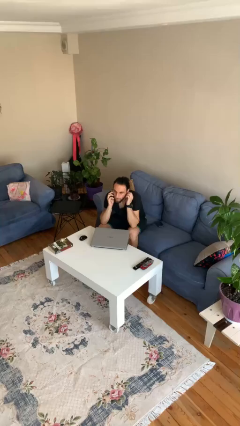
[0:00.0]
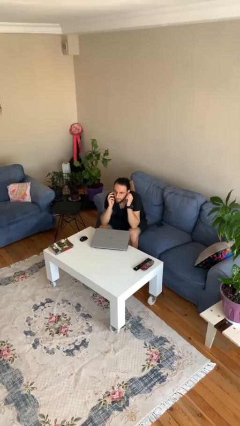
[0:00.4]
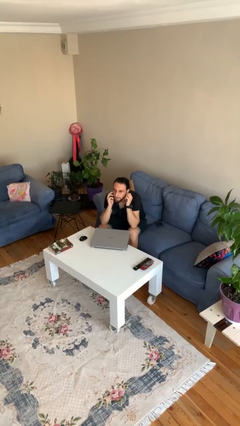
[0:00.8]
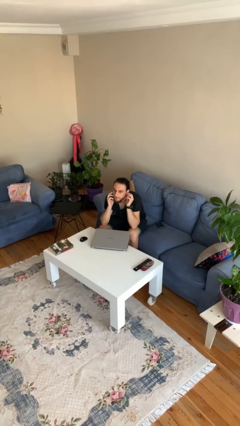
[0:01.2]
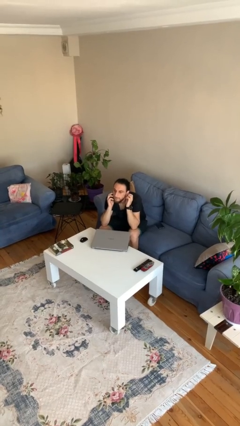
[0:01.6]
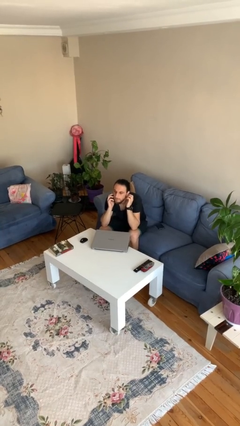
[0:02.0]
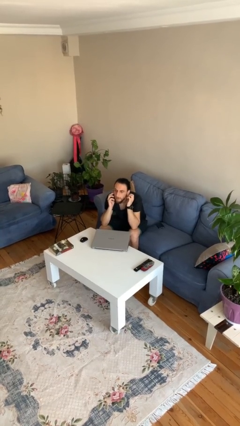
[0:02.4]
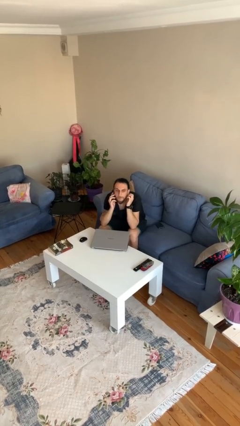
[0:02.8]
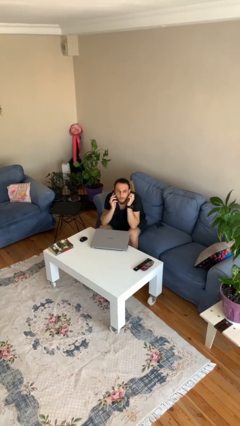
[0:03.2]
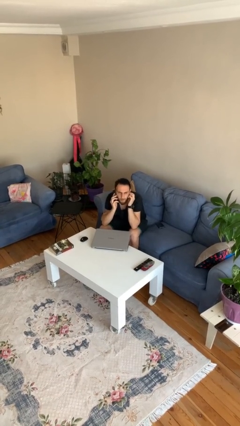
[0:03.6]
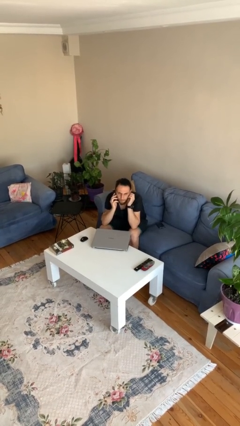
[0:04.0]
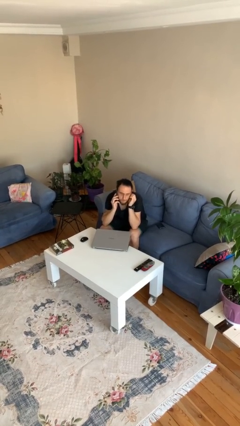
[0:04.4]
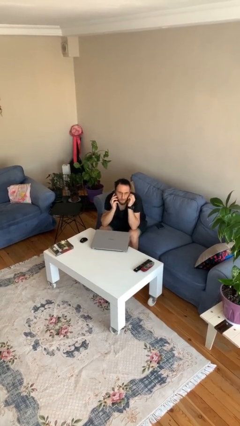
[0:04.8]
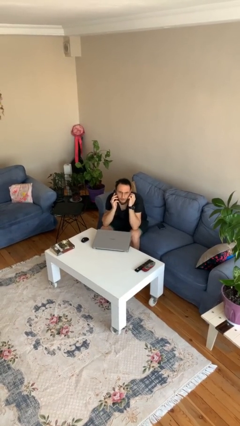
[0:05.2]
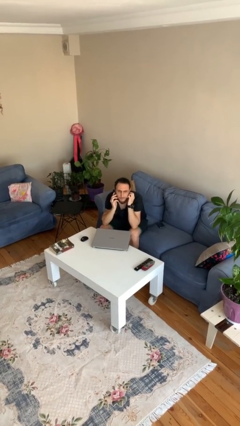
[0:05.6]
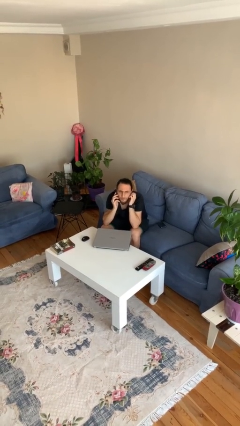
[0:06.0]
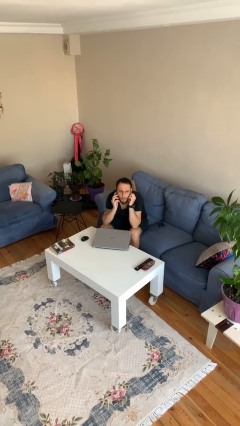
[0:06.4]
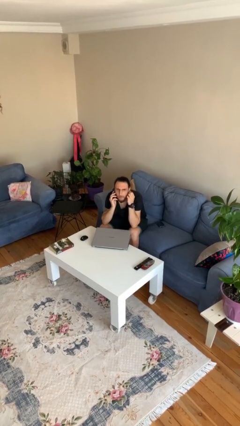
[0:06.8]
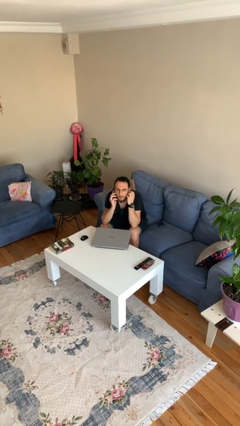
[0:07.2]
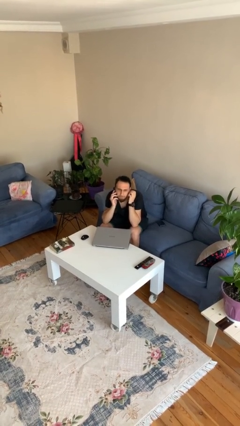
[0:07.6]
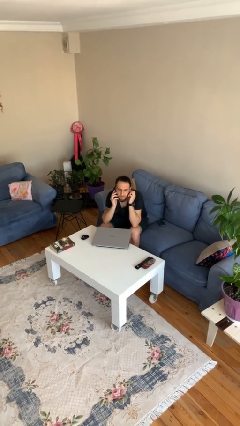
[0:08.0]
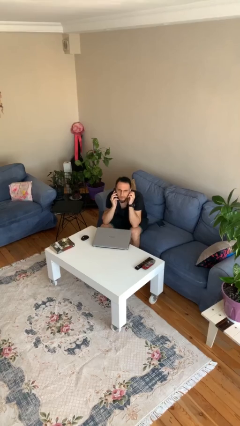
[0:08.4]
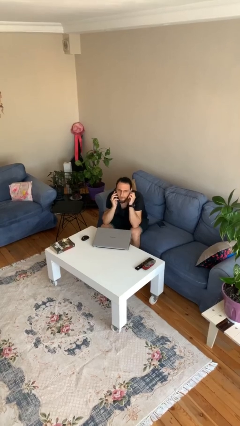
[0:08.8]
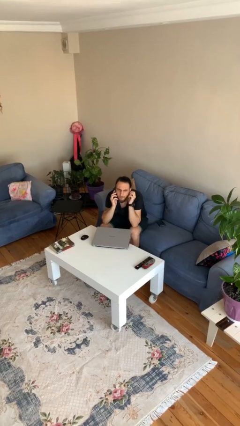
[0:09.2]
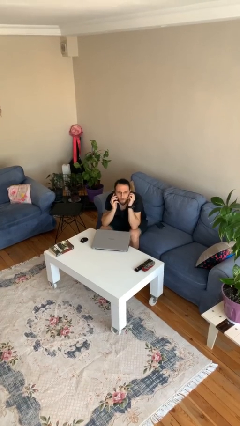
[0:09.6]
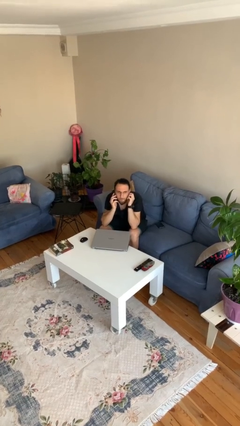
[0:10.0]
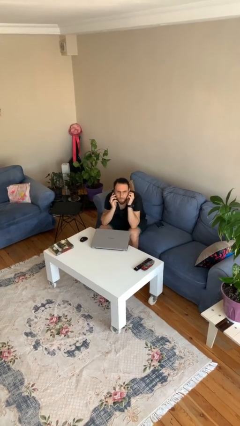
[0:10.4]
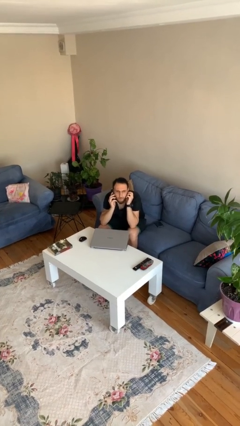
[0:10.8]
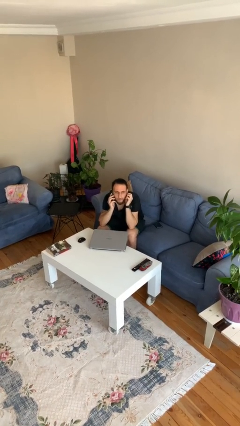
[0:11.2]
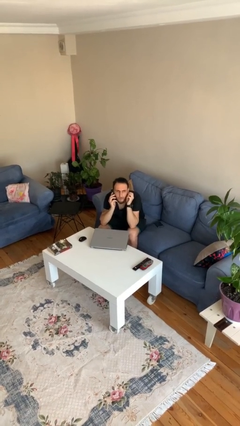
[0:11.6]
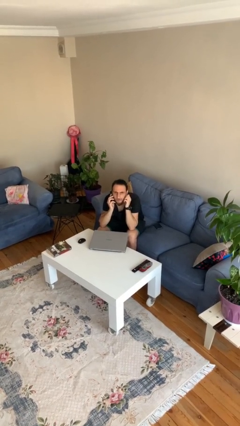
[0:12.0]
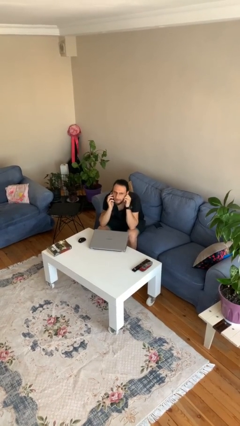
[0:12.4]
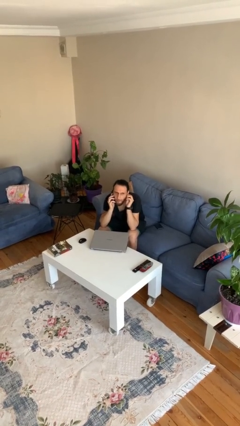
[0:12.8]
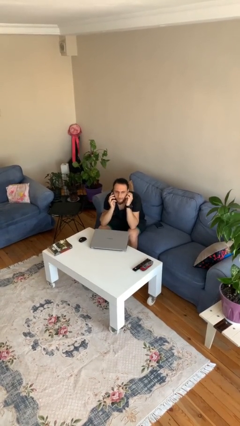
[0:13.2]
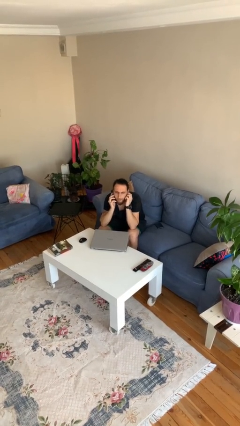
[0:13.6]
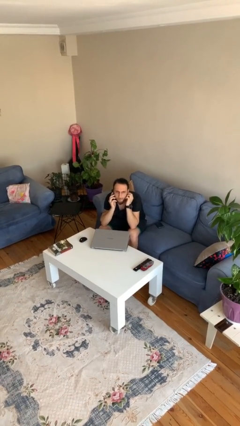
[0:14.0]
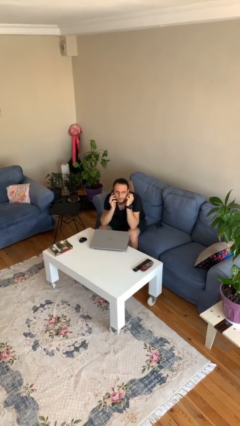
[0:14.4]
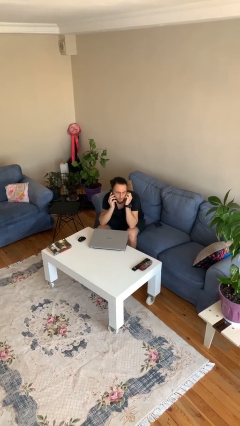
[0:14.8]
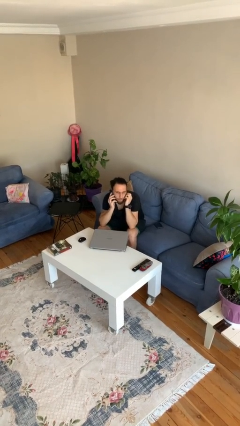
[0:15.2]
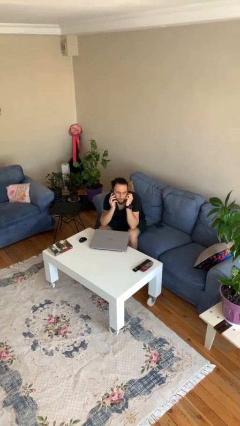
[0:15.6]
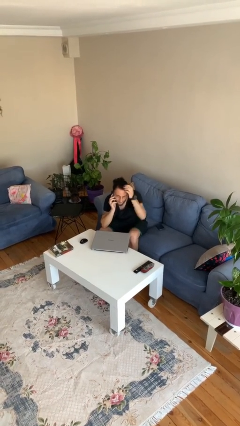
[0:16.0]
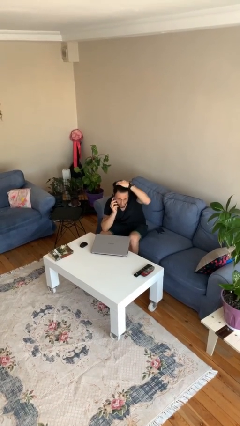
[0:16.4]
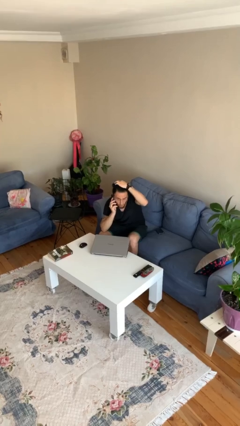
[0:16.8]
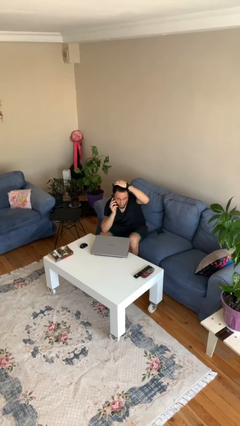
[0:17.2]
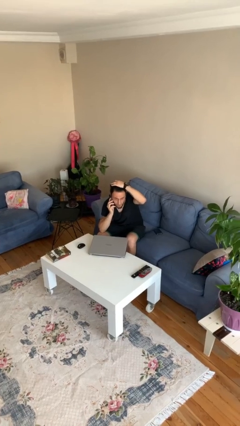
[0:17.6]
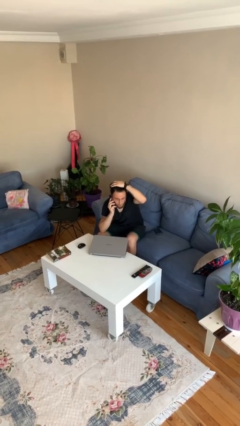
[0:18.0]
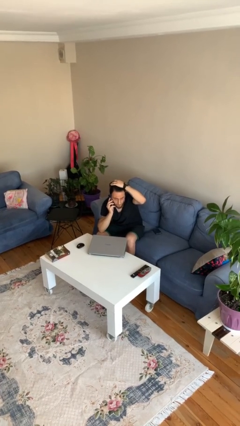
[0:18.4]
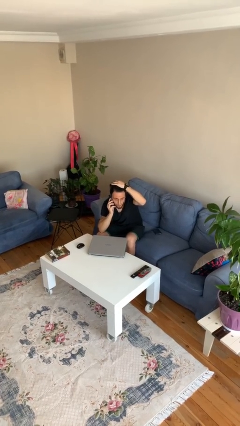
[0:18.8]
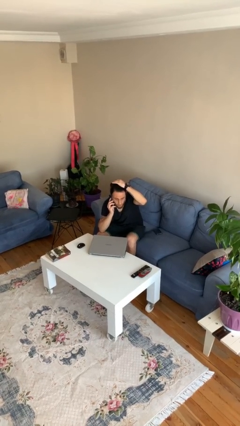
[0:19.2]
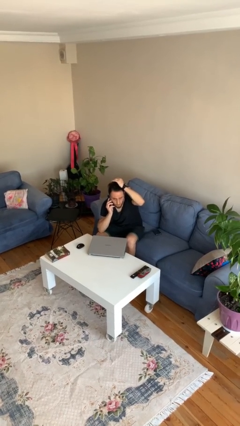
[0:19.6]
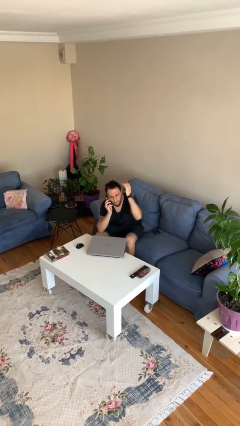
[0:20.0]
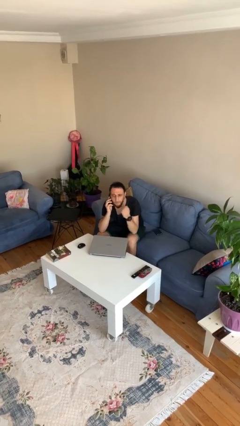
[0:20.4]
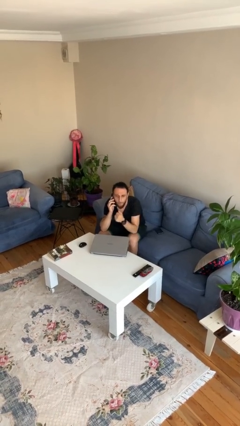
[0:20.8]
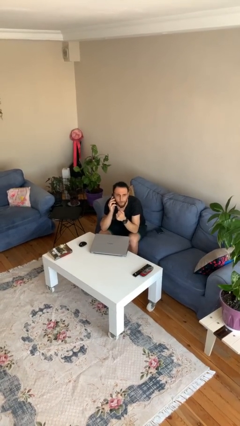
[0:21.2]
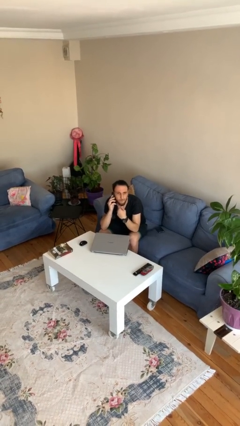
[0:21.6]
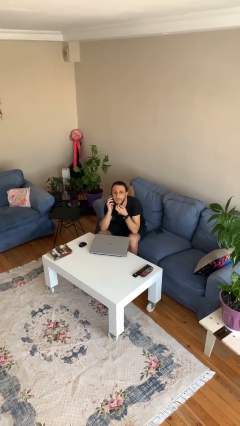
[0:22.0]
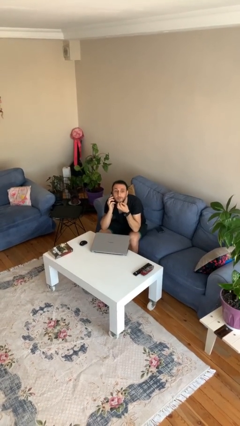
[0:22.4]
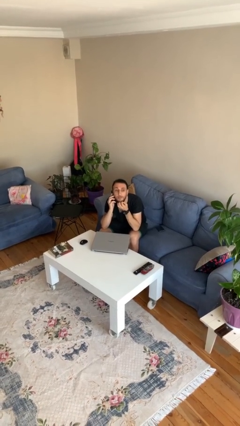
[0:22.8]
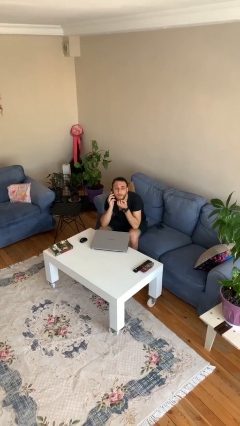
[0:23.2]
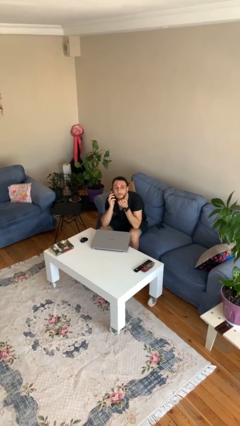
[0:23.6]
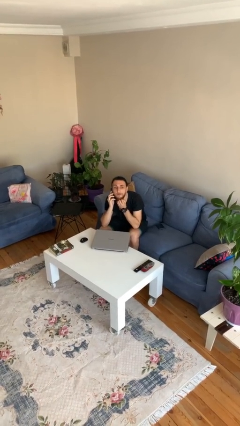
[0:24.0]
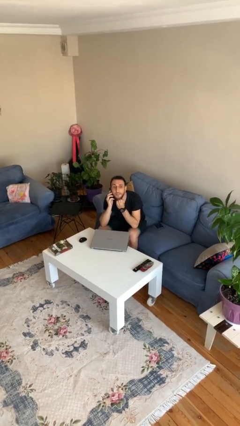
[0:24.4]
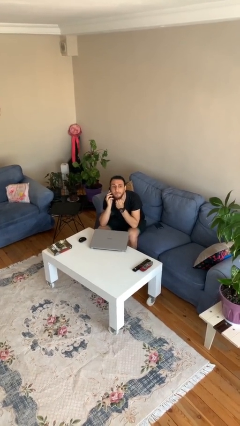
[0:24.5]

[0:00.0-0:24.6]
person talks on phone

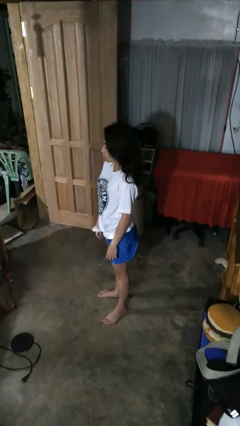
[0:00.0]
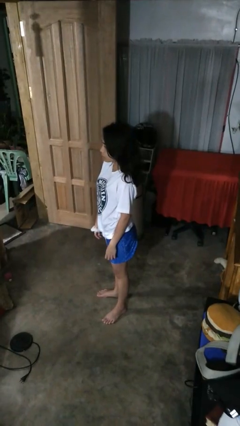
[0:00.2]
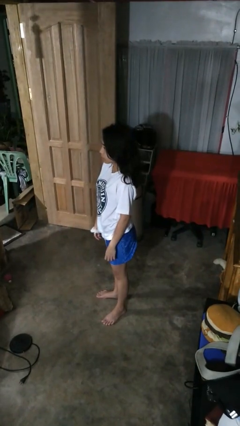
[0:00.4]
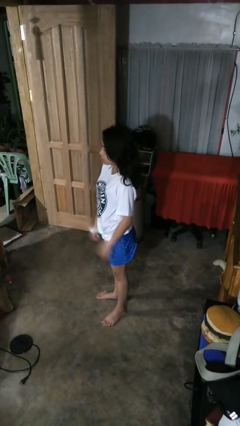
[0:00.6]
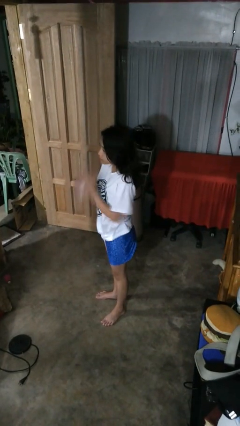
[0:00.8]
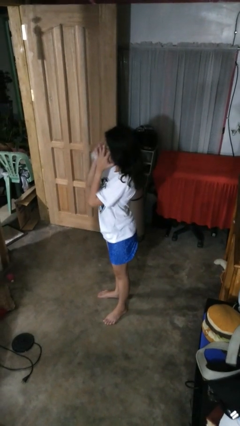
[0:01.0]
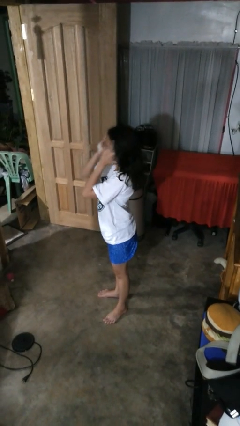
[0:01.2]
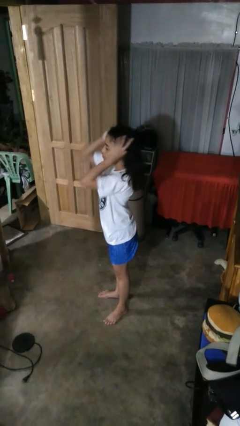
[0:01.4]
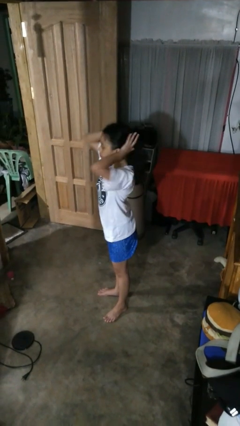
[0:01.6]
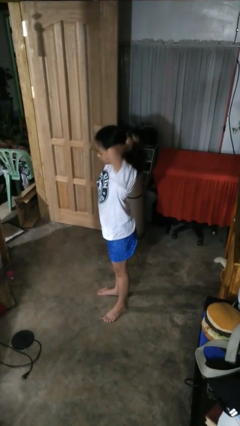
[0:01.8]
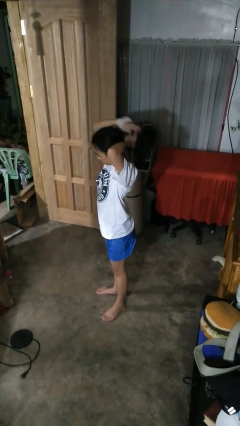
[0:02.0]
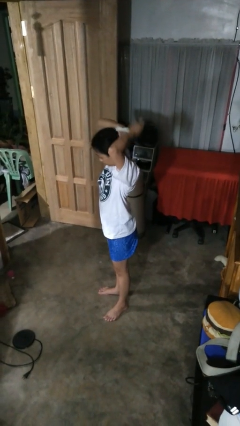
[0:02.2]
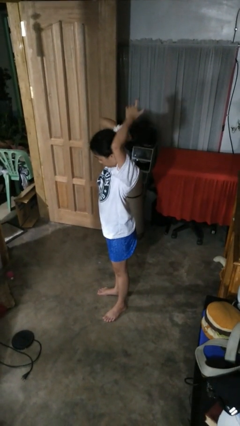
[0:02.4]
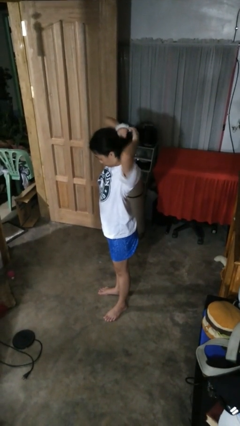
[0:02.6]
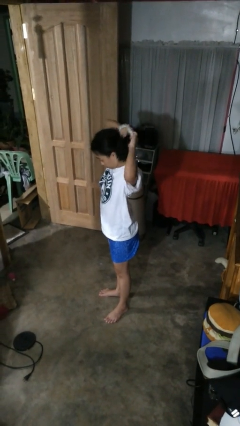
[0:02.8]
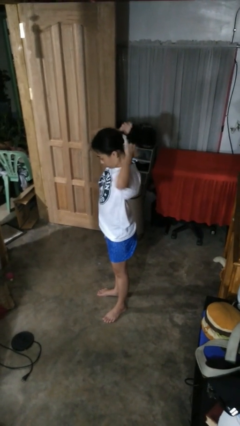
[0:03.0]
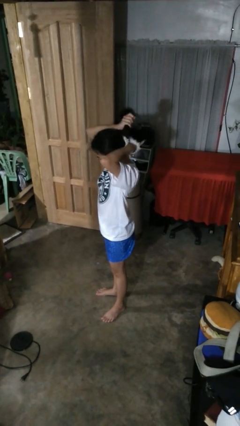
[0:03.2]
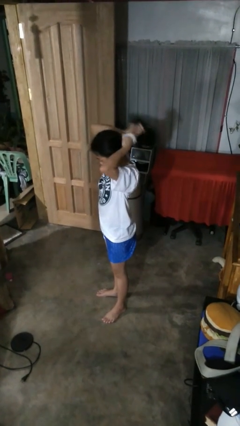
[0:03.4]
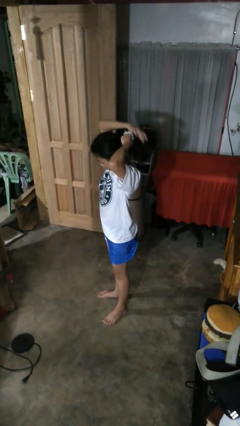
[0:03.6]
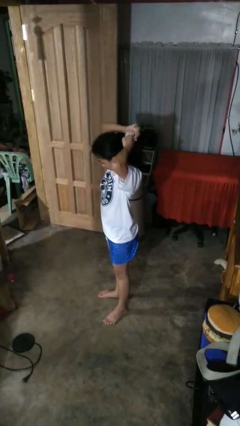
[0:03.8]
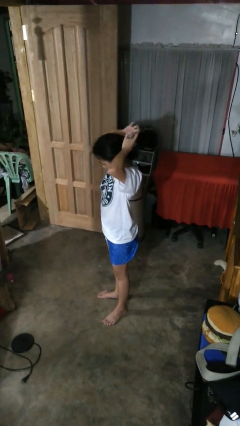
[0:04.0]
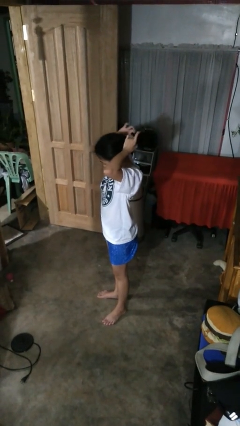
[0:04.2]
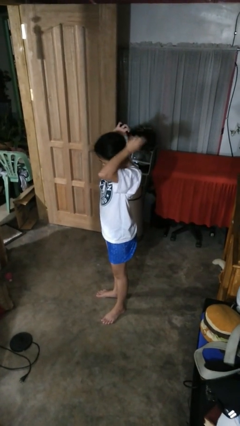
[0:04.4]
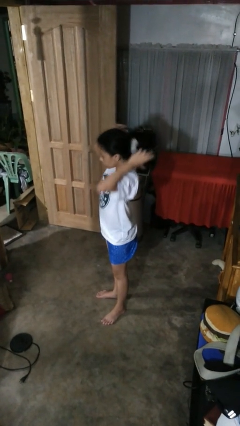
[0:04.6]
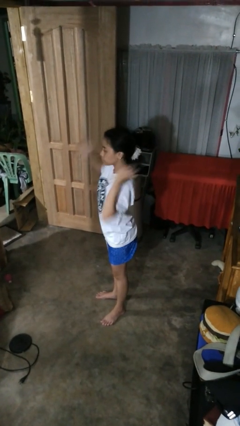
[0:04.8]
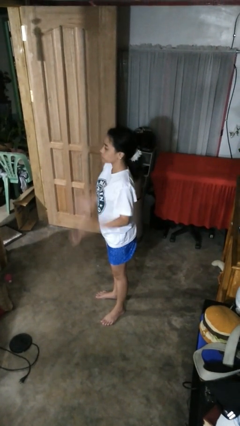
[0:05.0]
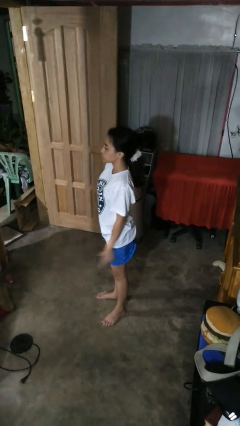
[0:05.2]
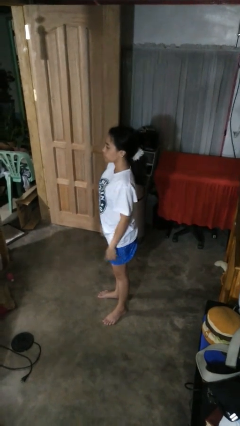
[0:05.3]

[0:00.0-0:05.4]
person puts hair in ponytail

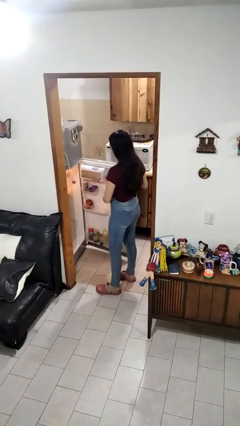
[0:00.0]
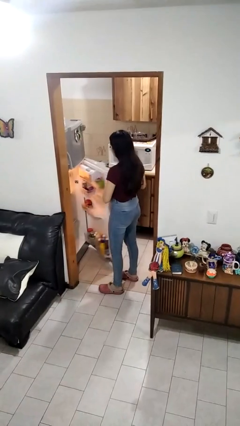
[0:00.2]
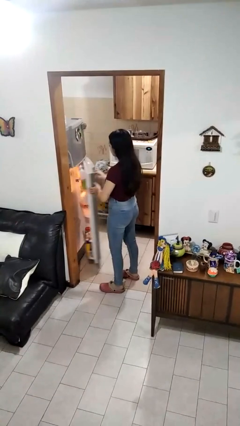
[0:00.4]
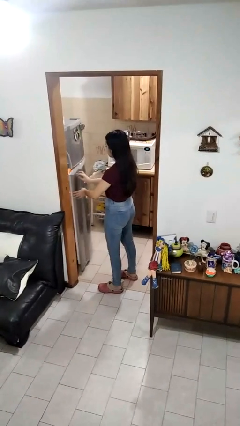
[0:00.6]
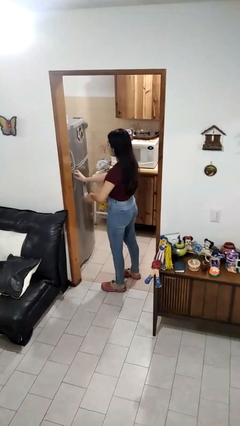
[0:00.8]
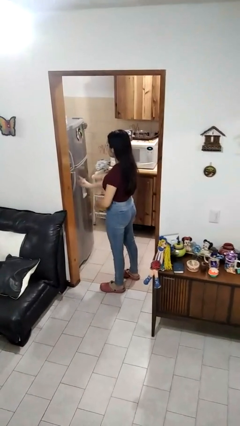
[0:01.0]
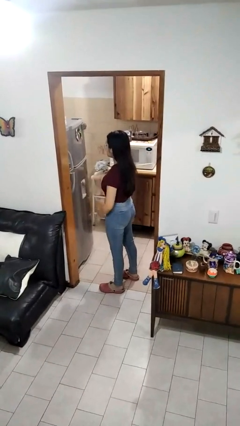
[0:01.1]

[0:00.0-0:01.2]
person closes refrigerator
